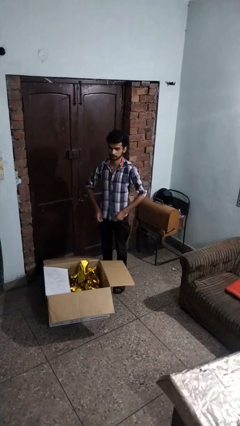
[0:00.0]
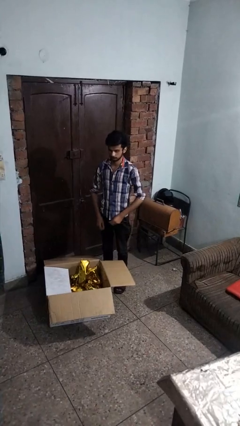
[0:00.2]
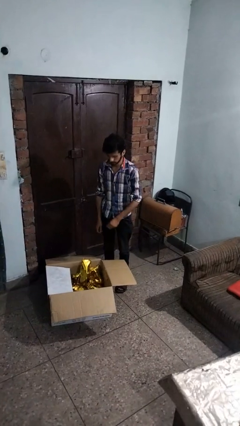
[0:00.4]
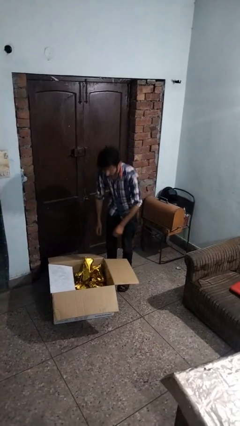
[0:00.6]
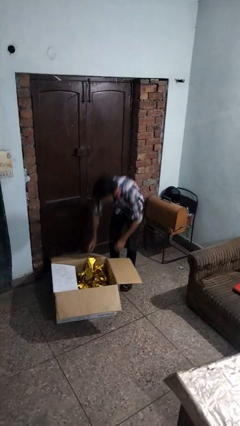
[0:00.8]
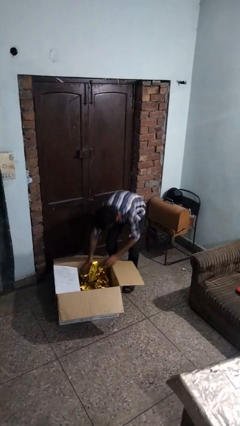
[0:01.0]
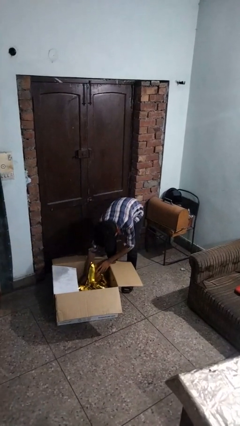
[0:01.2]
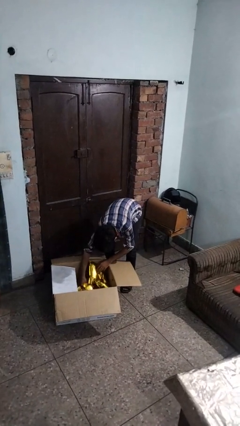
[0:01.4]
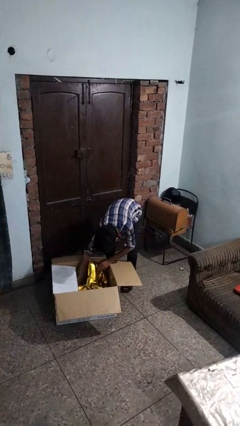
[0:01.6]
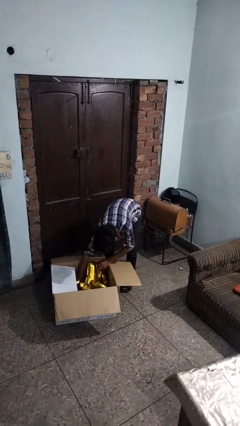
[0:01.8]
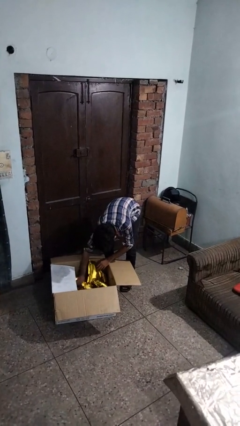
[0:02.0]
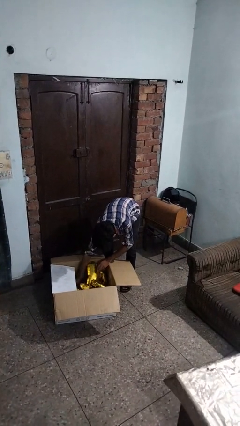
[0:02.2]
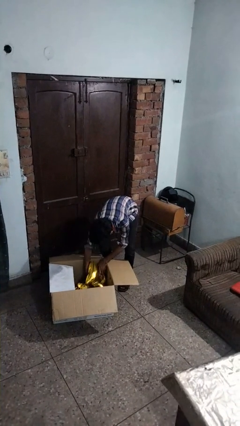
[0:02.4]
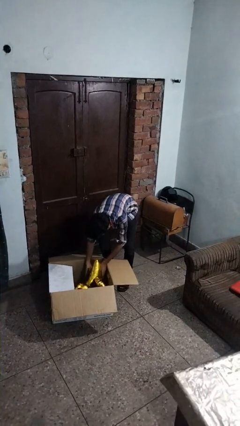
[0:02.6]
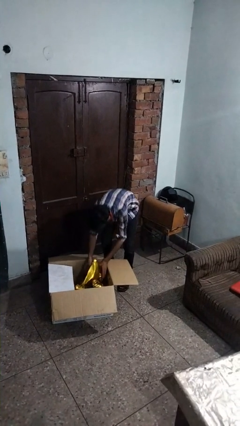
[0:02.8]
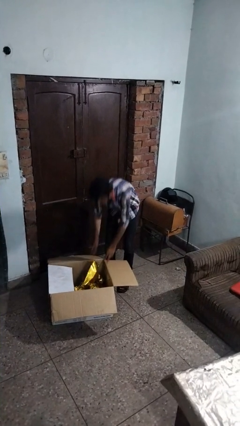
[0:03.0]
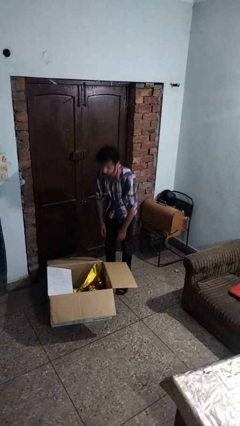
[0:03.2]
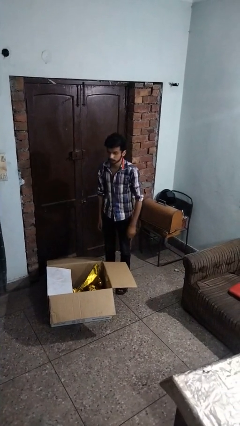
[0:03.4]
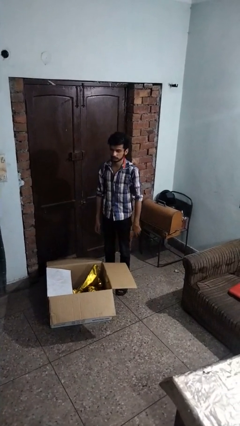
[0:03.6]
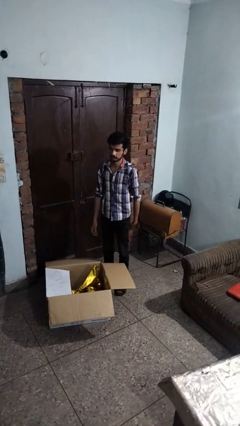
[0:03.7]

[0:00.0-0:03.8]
person searches in box

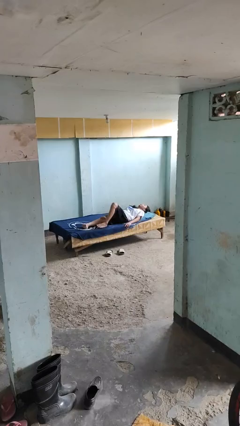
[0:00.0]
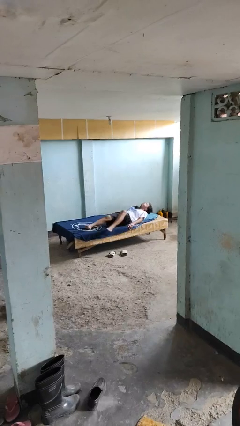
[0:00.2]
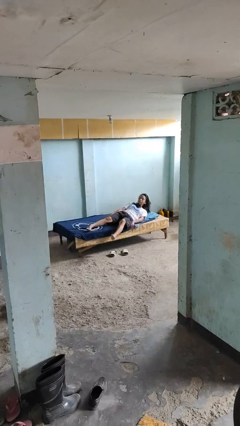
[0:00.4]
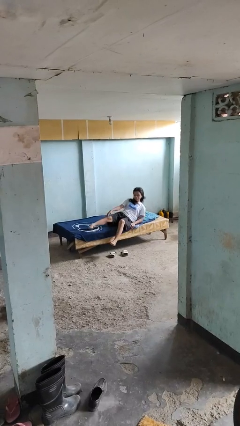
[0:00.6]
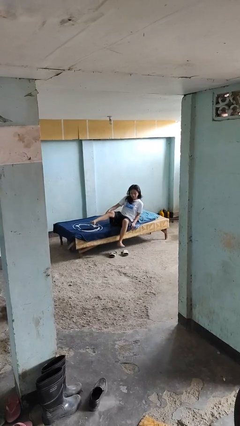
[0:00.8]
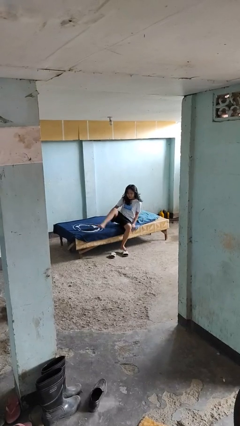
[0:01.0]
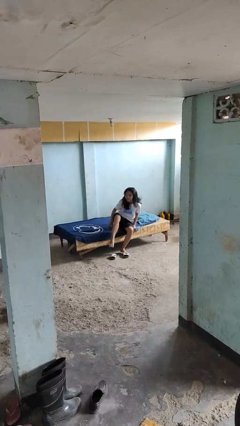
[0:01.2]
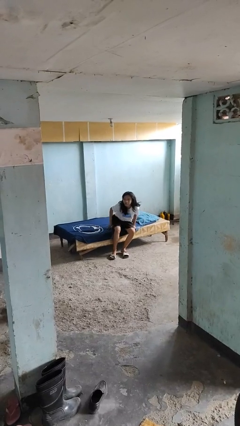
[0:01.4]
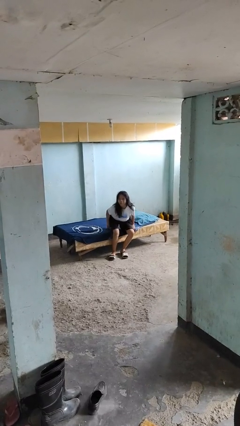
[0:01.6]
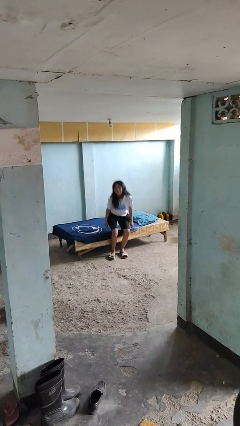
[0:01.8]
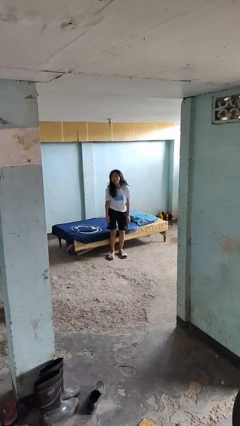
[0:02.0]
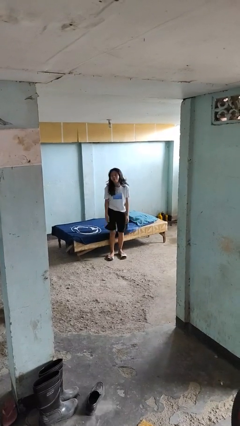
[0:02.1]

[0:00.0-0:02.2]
person stands up

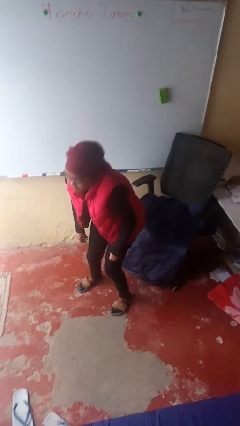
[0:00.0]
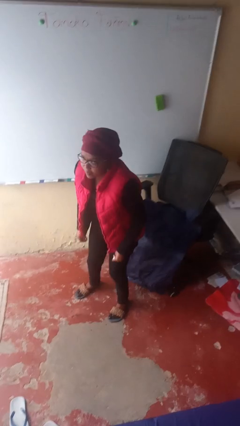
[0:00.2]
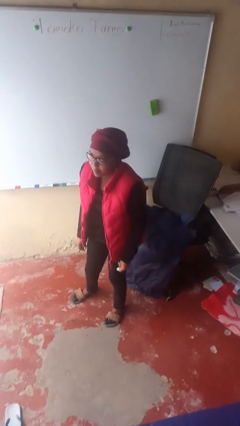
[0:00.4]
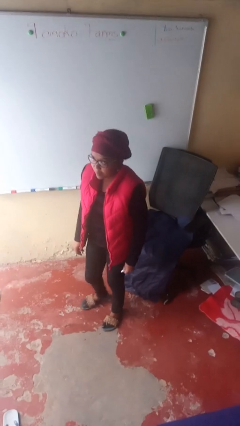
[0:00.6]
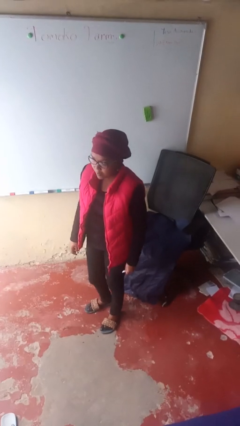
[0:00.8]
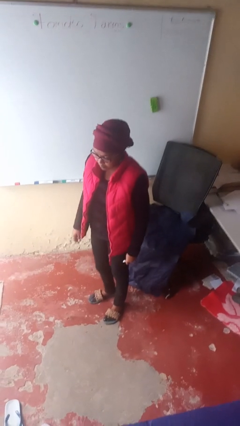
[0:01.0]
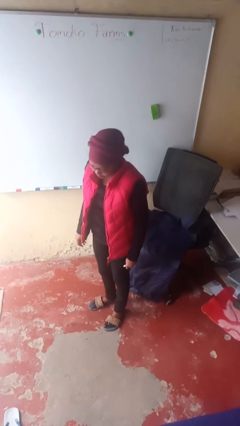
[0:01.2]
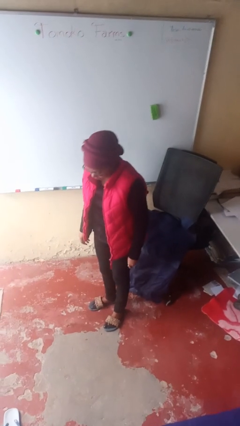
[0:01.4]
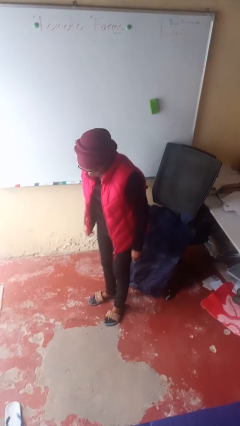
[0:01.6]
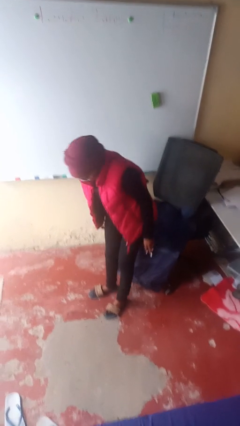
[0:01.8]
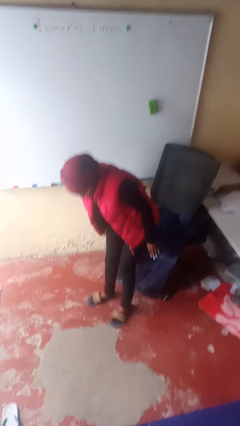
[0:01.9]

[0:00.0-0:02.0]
person stands up from floor

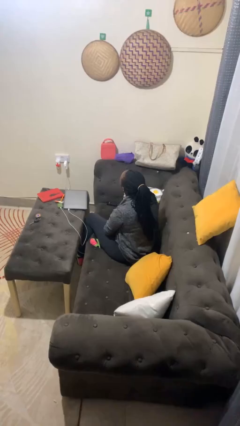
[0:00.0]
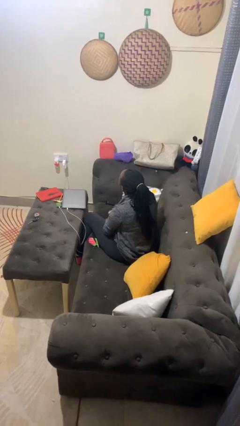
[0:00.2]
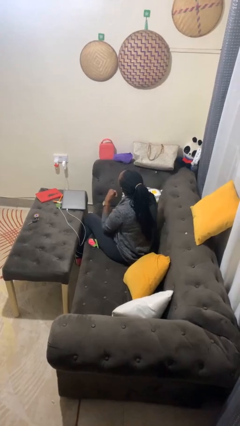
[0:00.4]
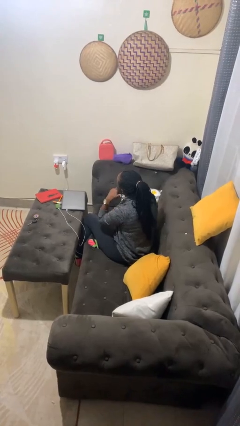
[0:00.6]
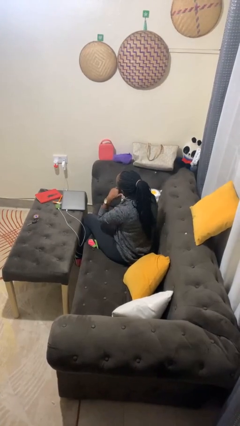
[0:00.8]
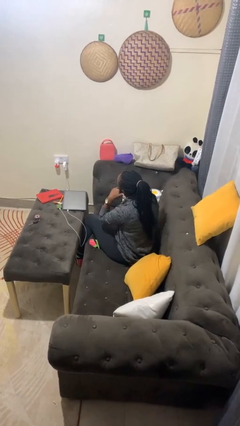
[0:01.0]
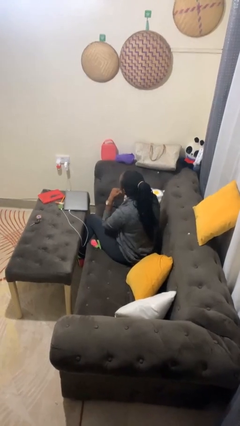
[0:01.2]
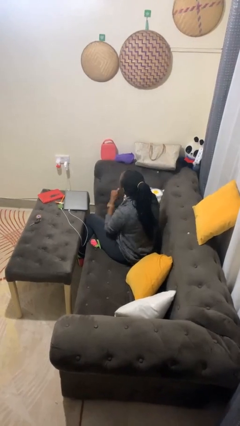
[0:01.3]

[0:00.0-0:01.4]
person gestures call me

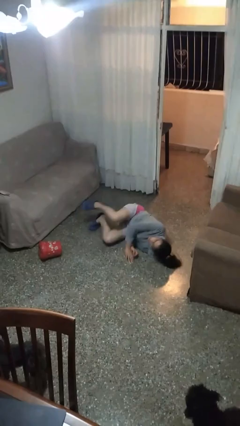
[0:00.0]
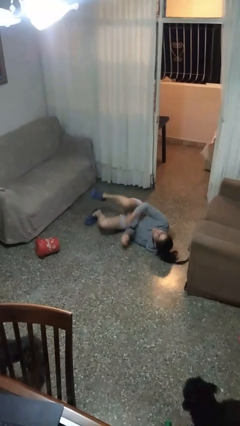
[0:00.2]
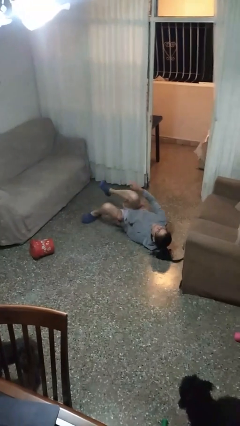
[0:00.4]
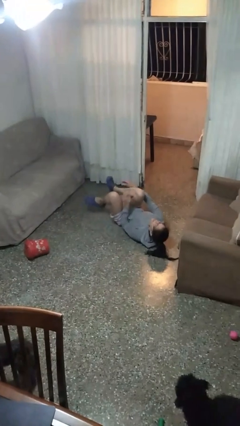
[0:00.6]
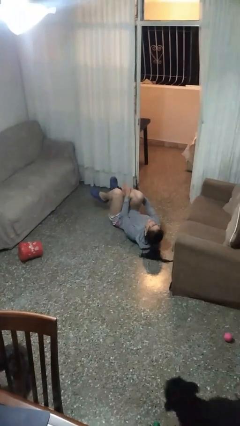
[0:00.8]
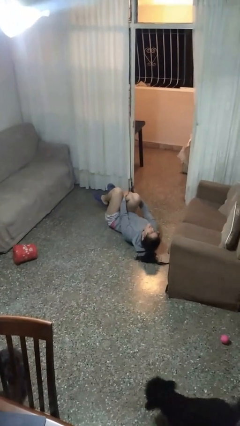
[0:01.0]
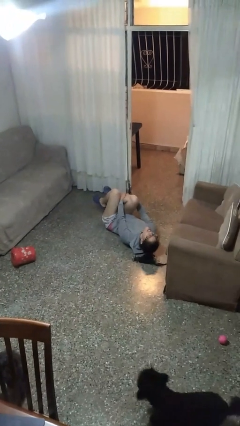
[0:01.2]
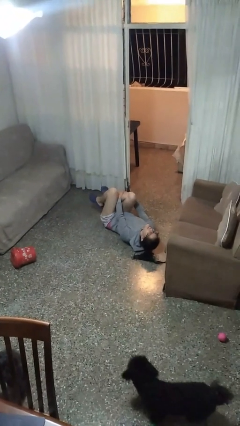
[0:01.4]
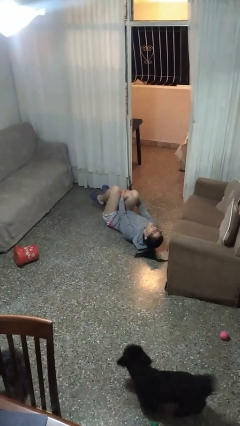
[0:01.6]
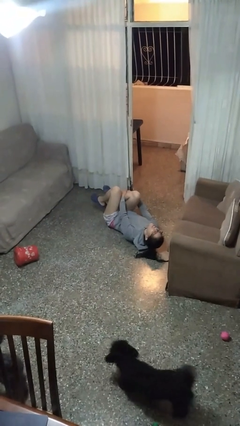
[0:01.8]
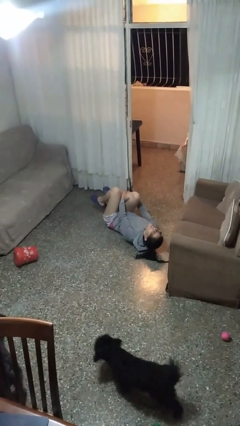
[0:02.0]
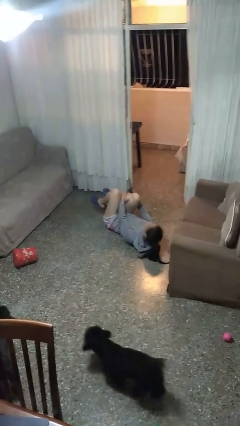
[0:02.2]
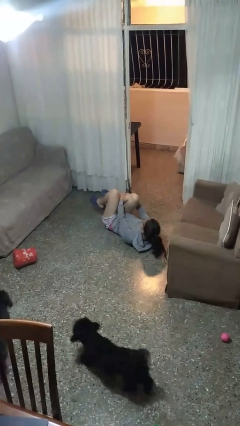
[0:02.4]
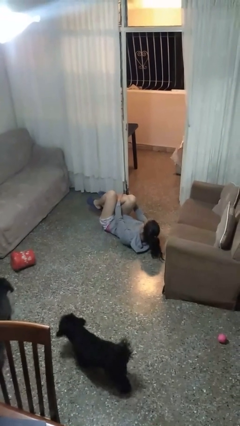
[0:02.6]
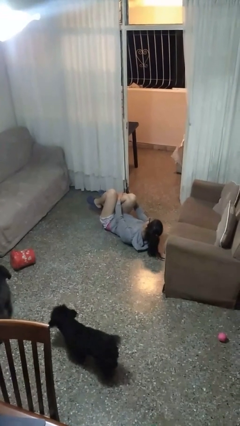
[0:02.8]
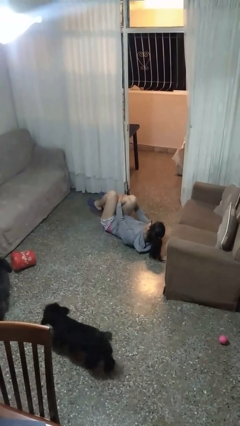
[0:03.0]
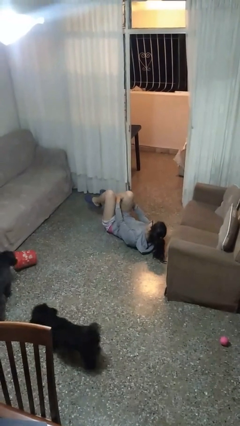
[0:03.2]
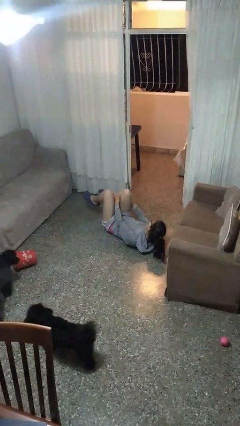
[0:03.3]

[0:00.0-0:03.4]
person lies down on floor

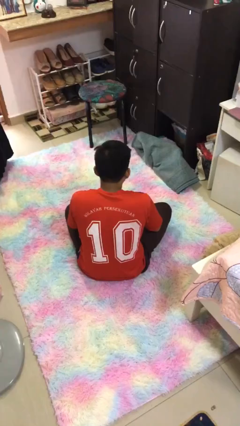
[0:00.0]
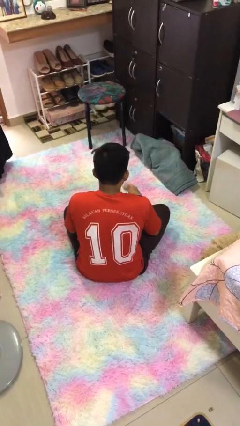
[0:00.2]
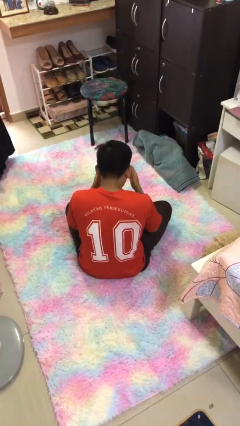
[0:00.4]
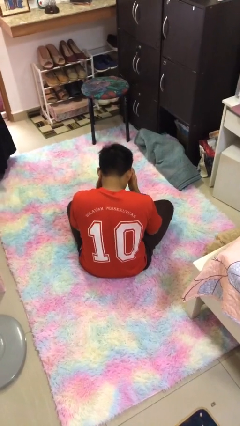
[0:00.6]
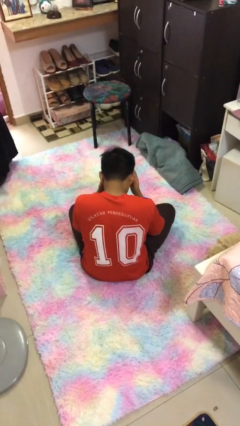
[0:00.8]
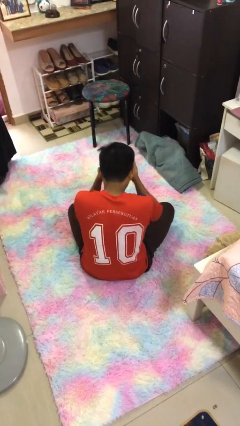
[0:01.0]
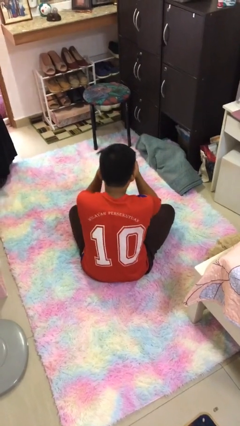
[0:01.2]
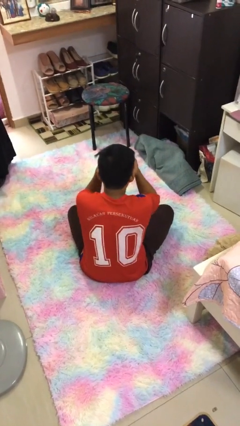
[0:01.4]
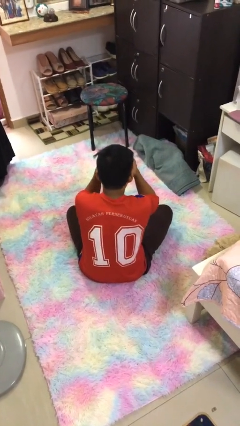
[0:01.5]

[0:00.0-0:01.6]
person covers face with hands

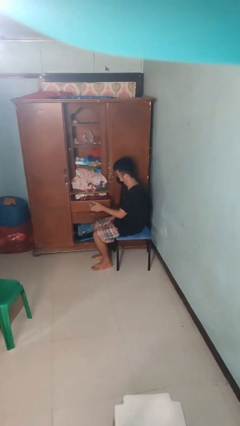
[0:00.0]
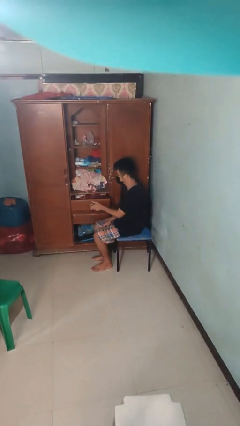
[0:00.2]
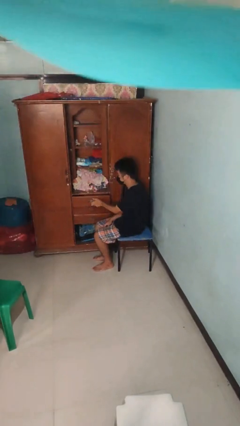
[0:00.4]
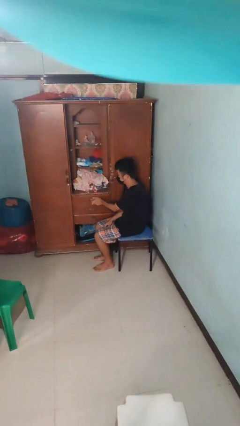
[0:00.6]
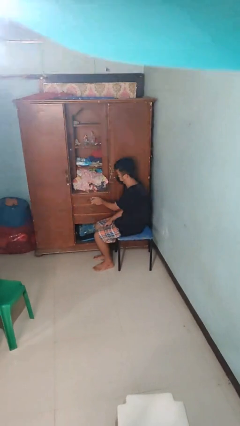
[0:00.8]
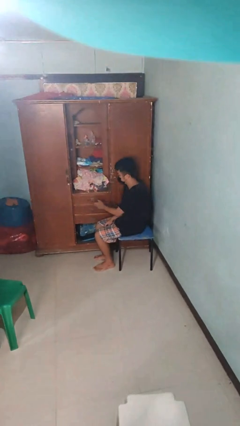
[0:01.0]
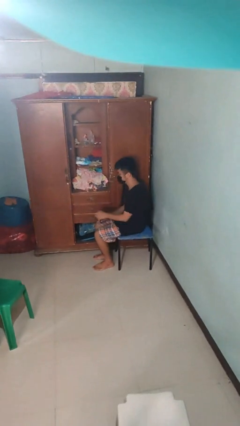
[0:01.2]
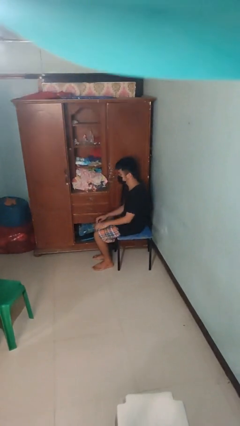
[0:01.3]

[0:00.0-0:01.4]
person closes dresser drawer

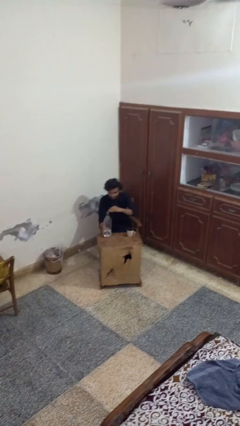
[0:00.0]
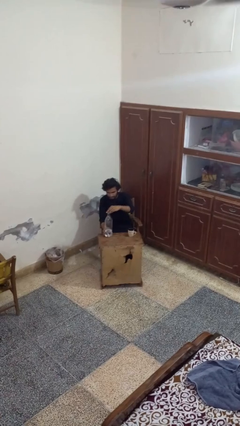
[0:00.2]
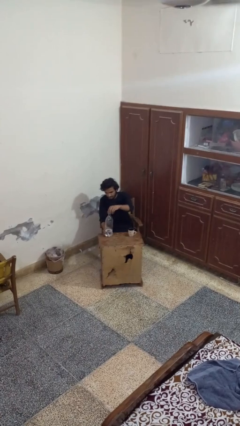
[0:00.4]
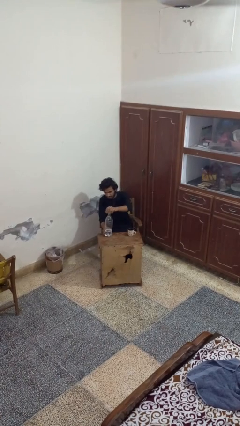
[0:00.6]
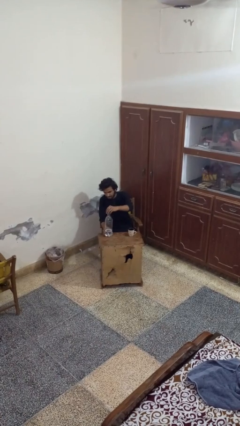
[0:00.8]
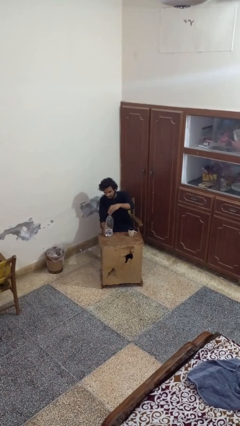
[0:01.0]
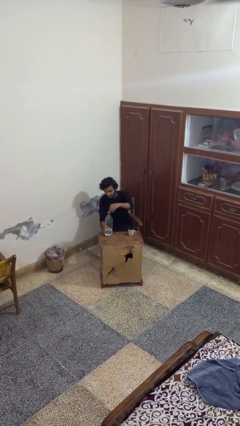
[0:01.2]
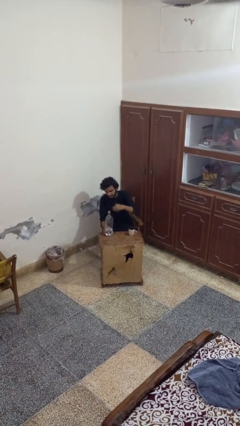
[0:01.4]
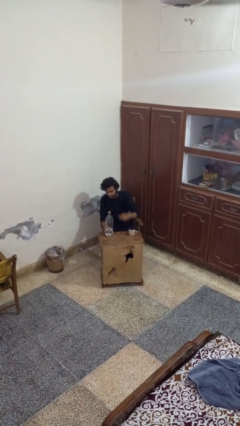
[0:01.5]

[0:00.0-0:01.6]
person unscrews lid from bottle
